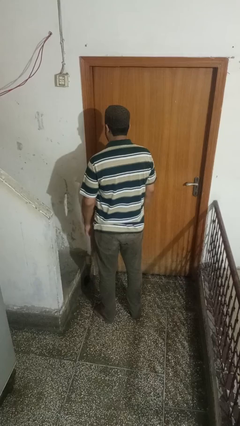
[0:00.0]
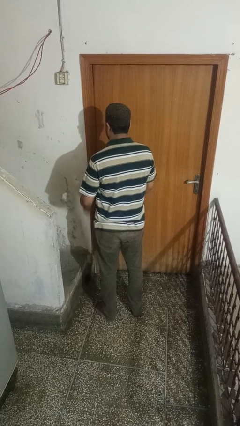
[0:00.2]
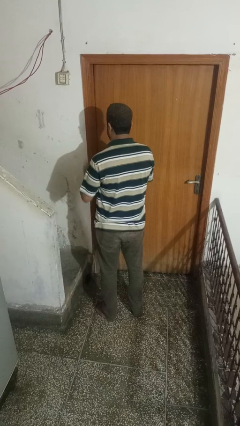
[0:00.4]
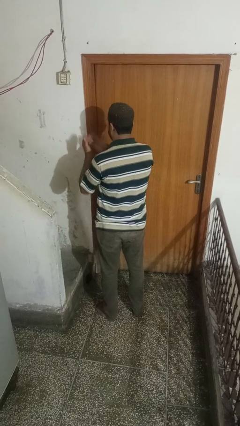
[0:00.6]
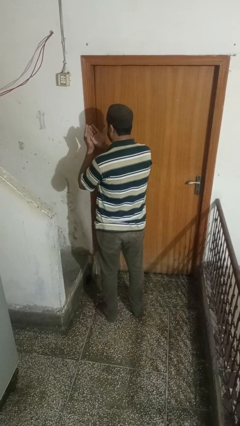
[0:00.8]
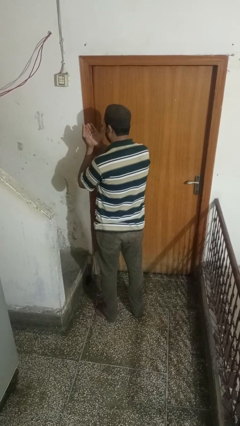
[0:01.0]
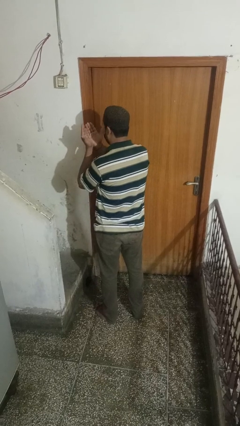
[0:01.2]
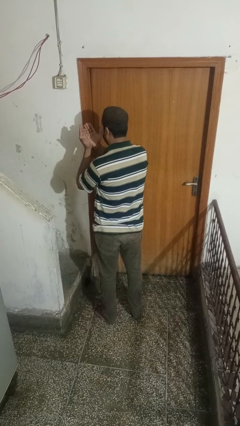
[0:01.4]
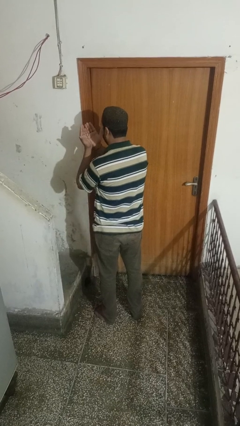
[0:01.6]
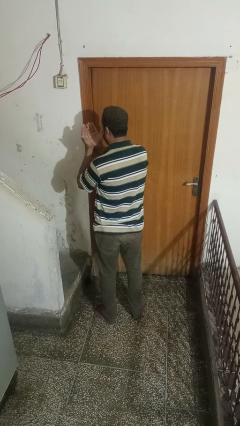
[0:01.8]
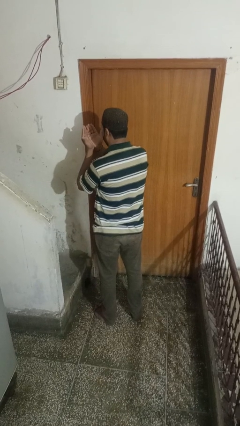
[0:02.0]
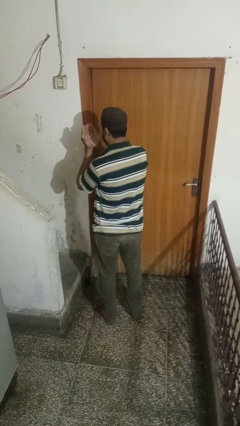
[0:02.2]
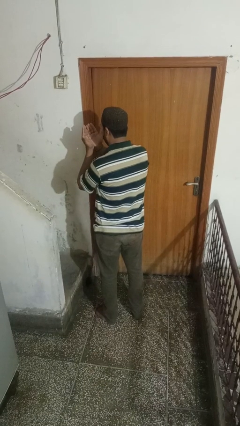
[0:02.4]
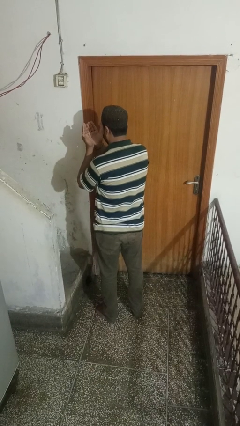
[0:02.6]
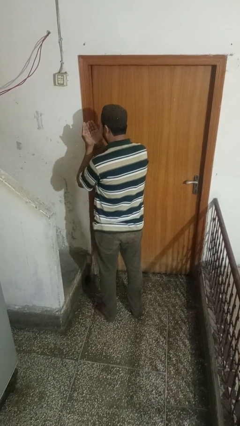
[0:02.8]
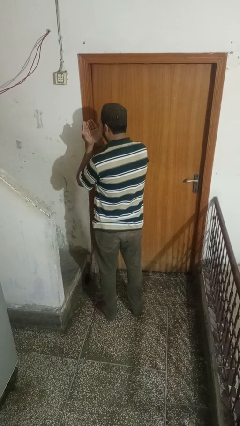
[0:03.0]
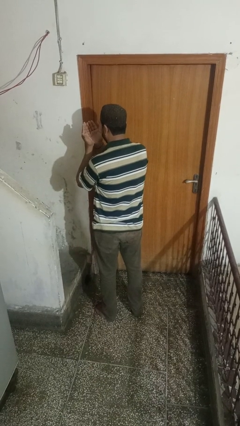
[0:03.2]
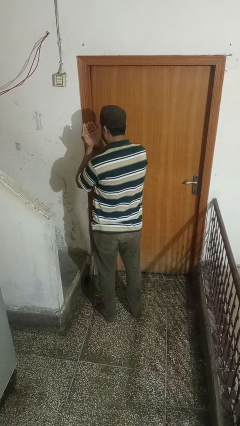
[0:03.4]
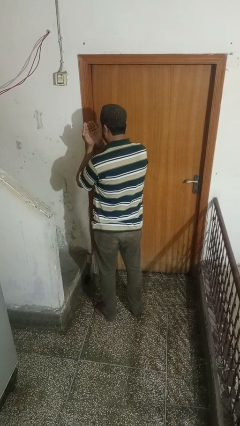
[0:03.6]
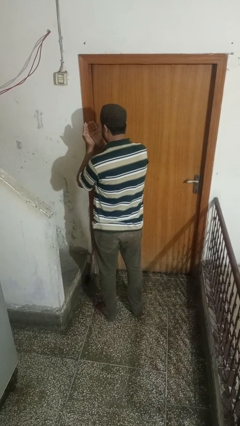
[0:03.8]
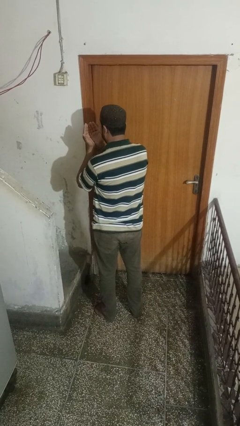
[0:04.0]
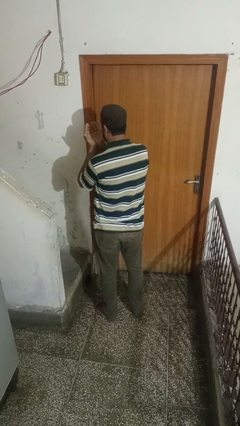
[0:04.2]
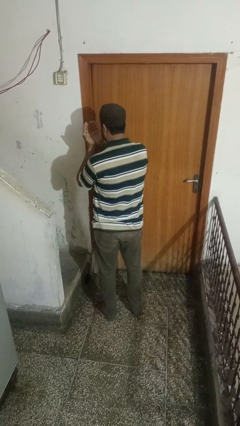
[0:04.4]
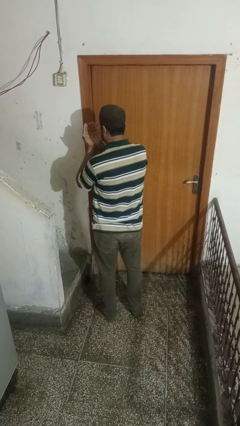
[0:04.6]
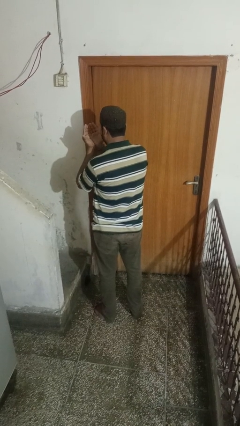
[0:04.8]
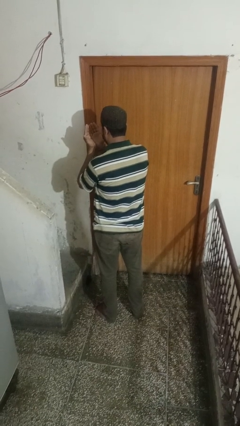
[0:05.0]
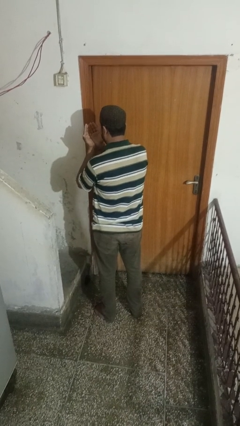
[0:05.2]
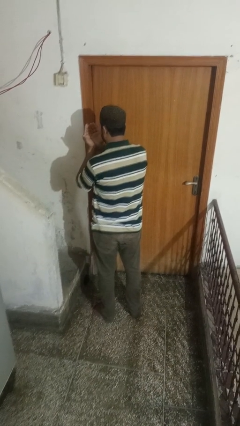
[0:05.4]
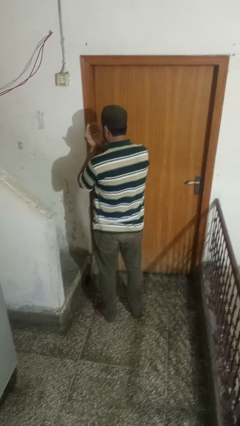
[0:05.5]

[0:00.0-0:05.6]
person prays

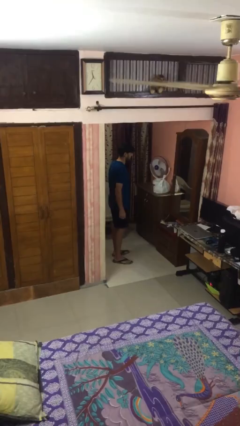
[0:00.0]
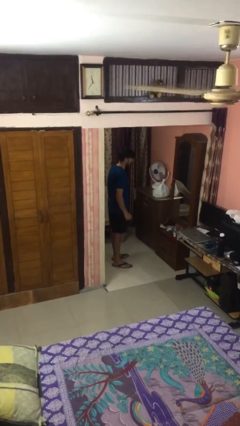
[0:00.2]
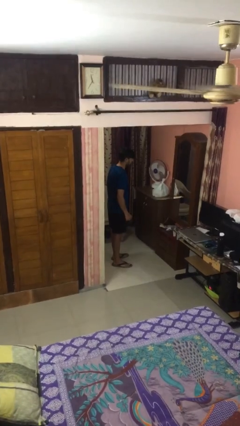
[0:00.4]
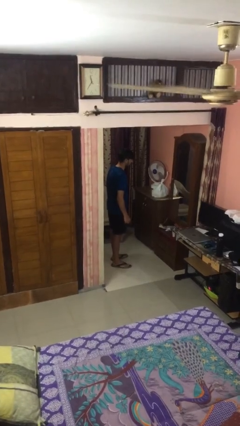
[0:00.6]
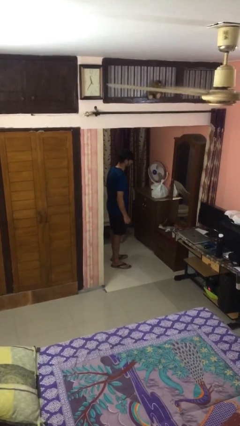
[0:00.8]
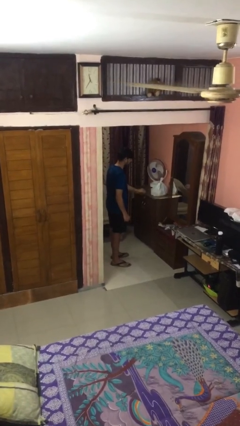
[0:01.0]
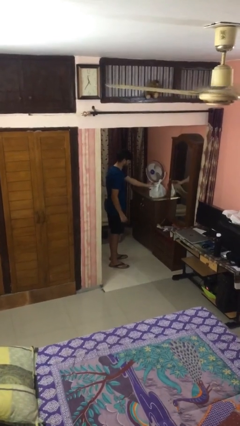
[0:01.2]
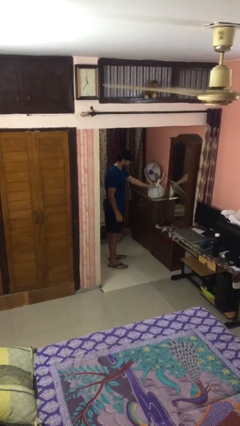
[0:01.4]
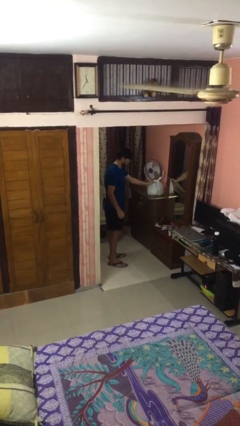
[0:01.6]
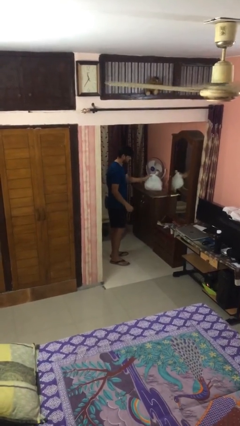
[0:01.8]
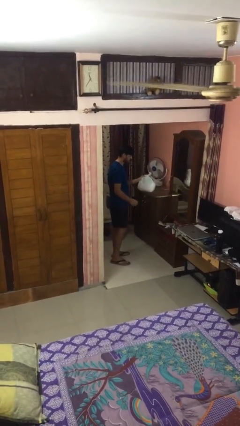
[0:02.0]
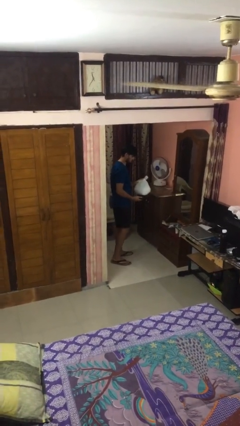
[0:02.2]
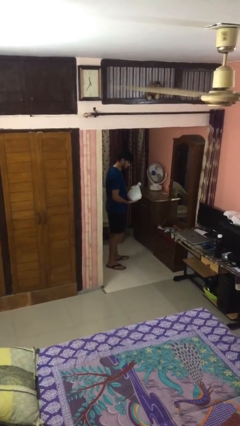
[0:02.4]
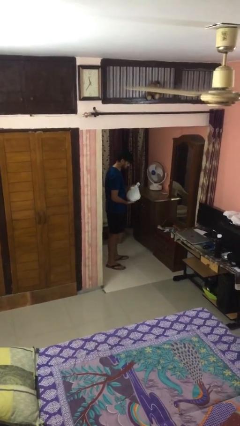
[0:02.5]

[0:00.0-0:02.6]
person picks up object from countertop

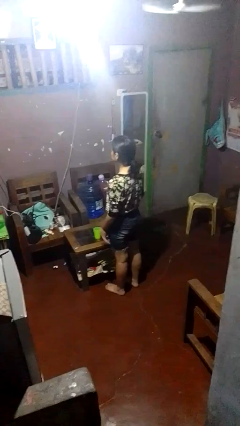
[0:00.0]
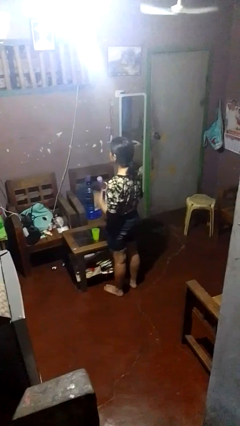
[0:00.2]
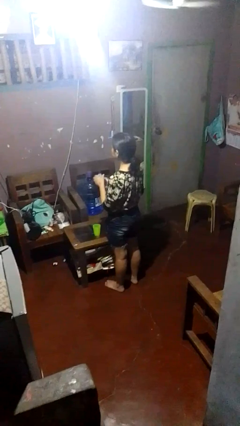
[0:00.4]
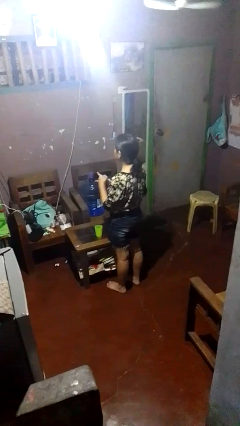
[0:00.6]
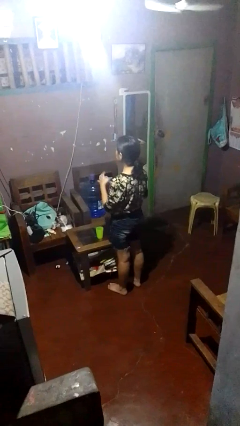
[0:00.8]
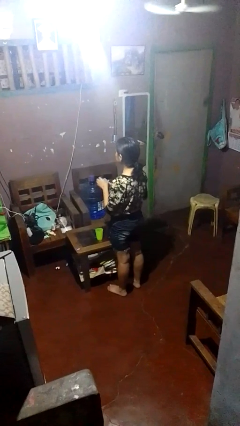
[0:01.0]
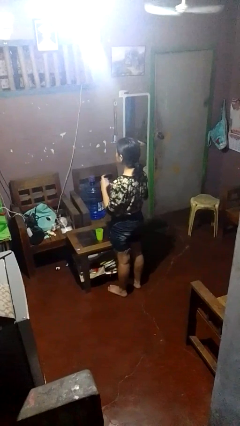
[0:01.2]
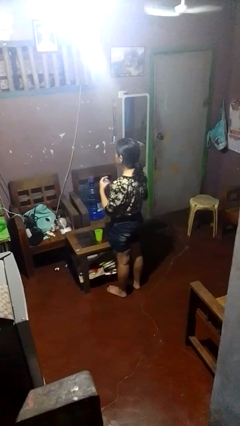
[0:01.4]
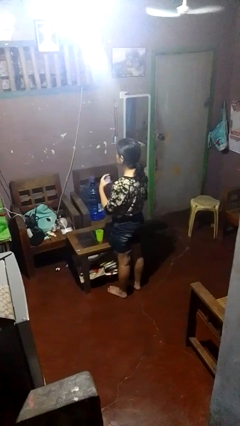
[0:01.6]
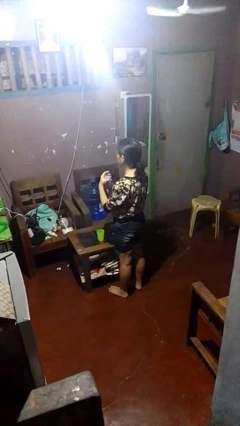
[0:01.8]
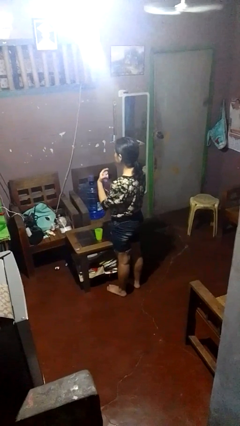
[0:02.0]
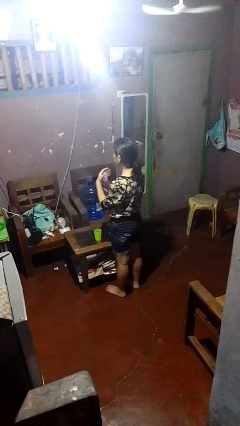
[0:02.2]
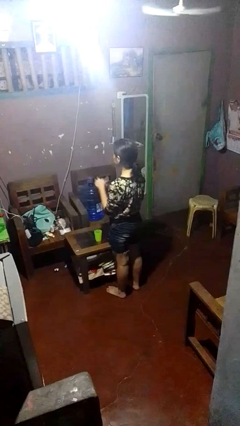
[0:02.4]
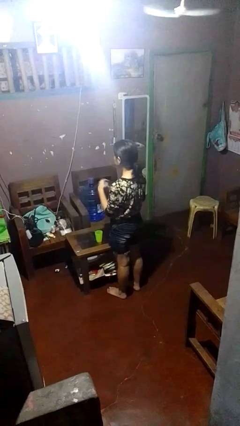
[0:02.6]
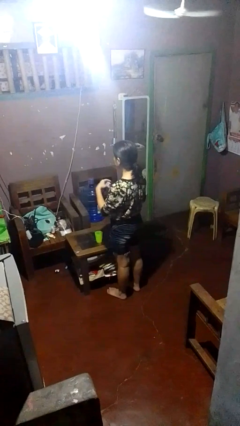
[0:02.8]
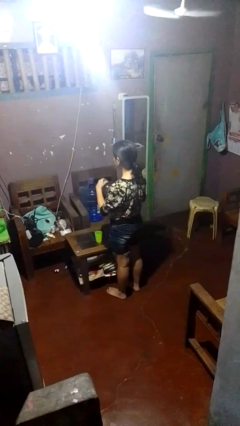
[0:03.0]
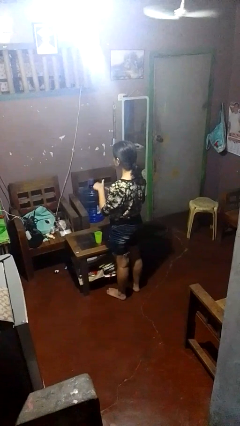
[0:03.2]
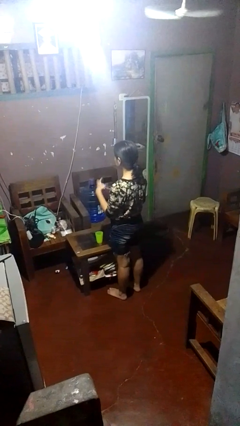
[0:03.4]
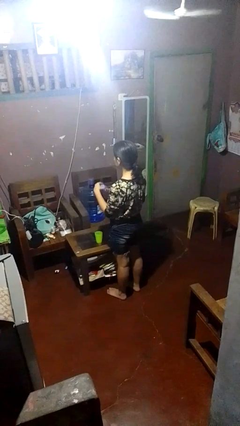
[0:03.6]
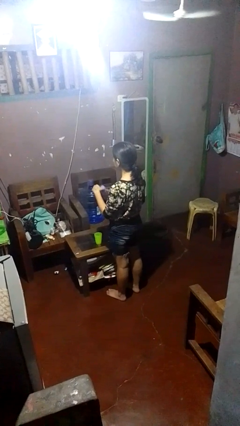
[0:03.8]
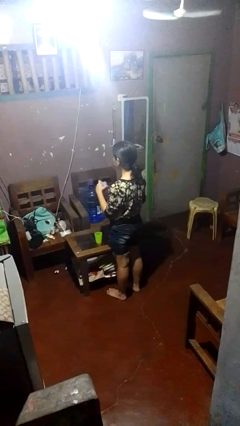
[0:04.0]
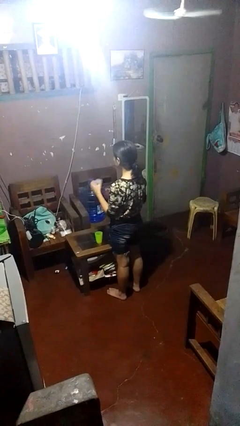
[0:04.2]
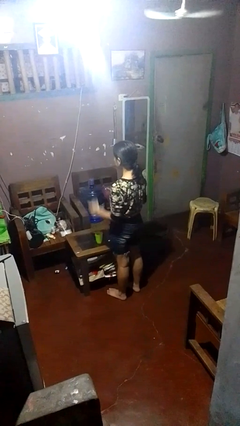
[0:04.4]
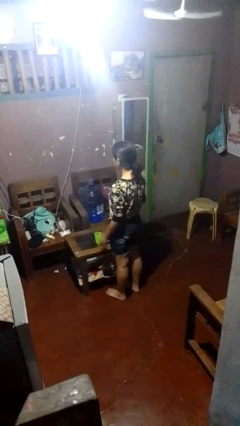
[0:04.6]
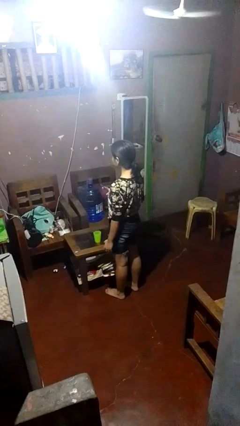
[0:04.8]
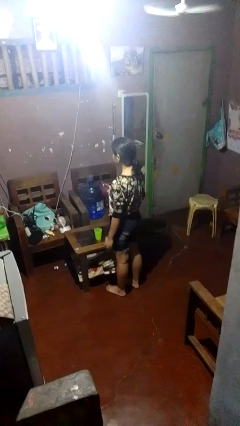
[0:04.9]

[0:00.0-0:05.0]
person unscrews lid from bottle

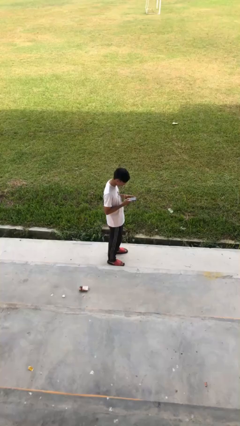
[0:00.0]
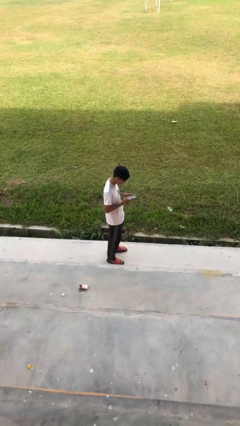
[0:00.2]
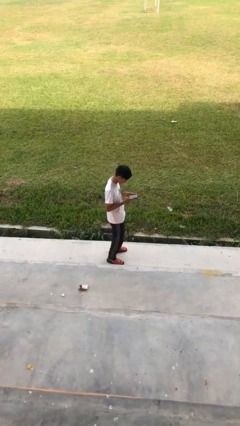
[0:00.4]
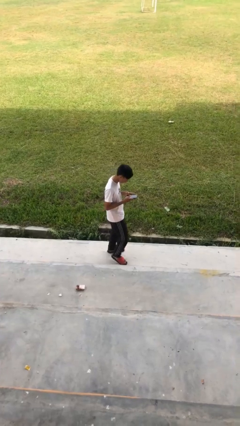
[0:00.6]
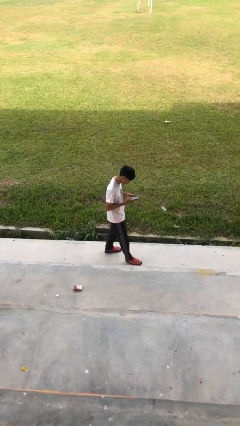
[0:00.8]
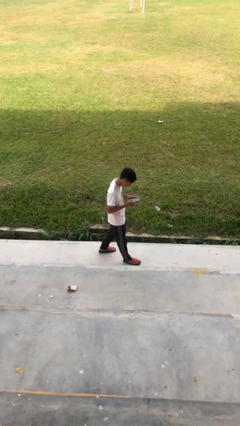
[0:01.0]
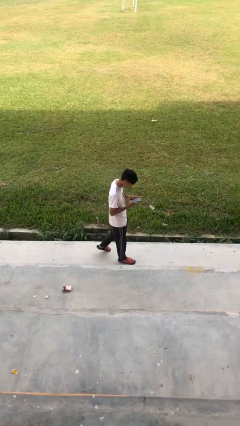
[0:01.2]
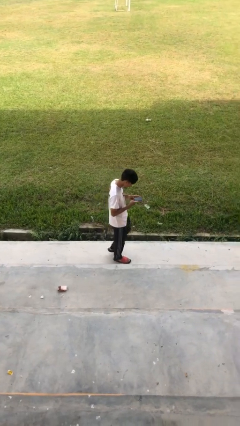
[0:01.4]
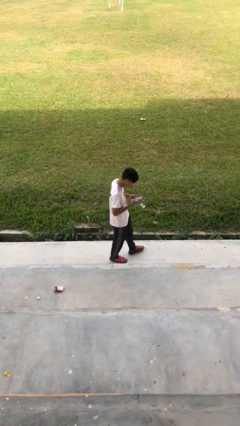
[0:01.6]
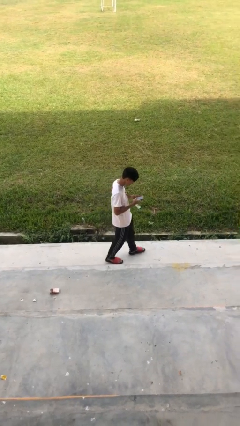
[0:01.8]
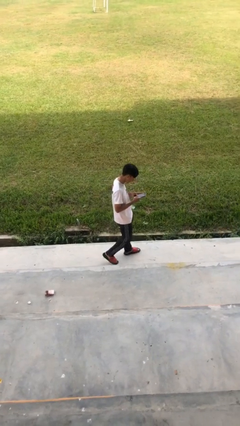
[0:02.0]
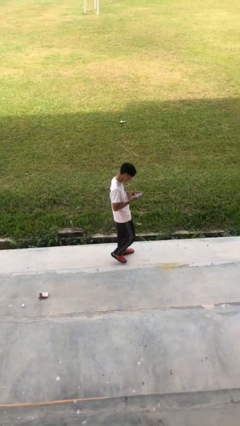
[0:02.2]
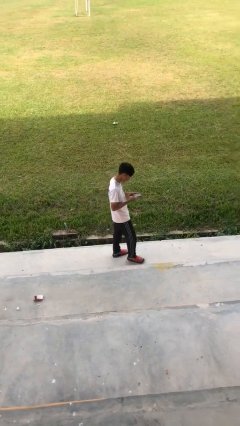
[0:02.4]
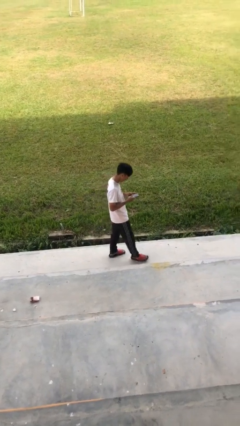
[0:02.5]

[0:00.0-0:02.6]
person texts on phone

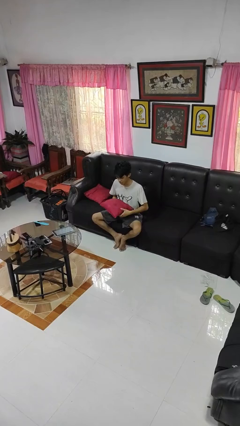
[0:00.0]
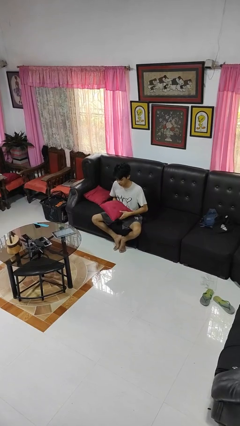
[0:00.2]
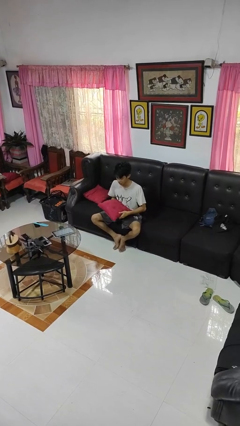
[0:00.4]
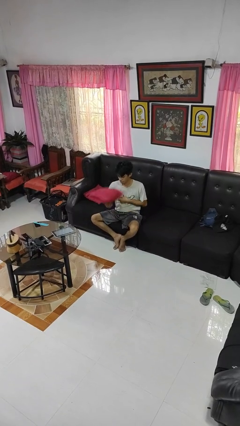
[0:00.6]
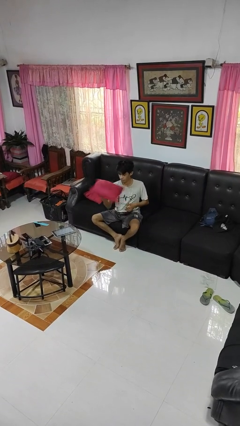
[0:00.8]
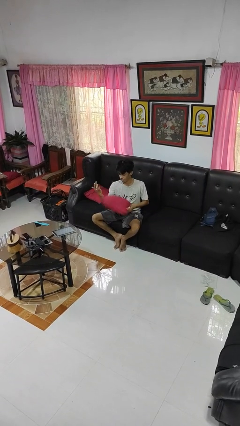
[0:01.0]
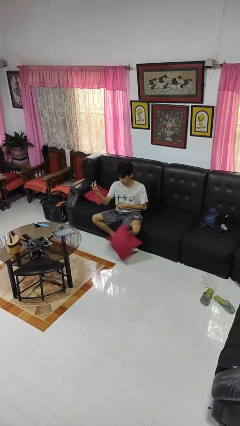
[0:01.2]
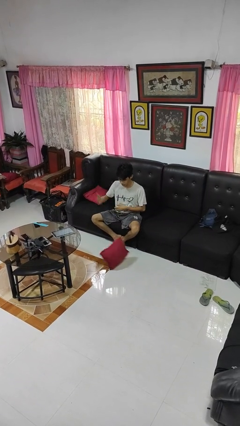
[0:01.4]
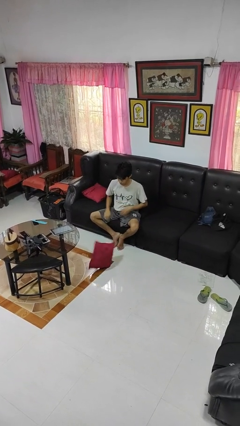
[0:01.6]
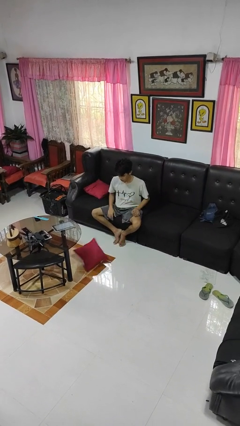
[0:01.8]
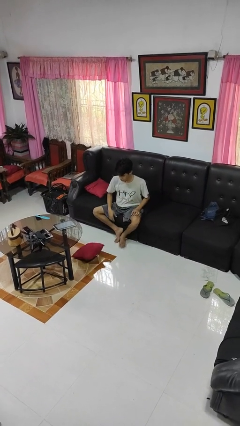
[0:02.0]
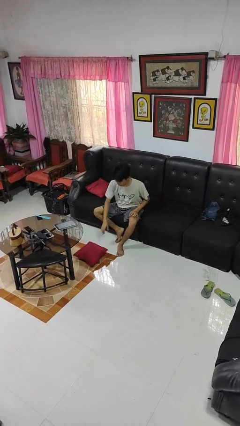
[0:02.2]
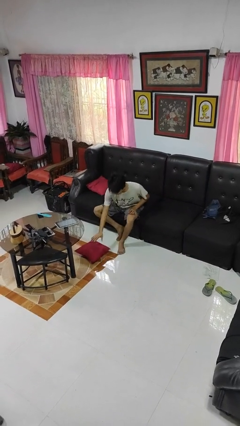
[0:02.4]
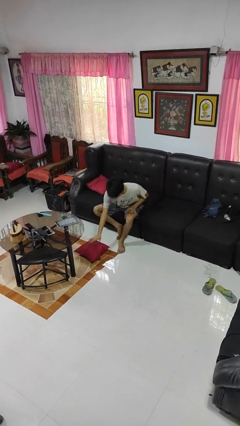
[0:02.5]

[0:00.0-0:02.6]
person drops object
